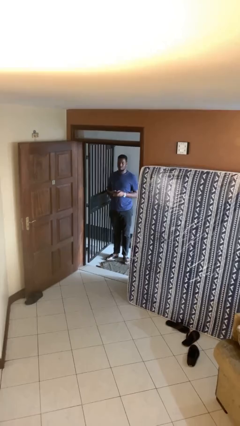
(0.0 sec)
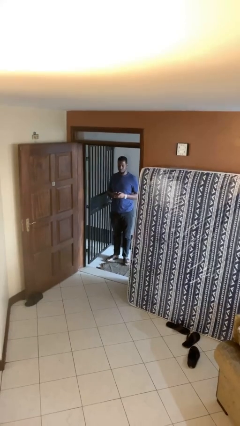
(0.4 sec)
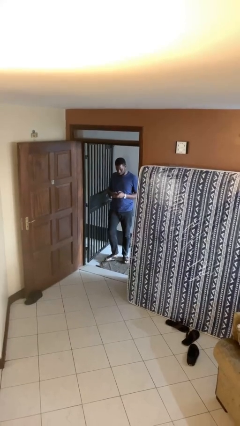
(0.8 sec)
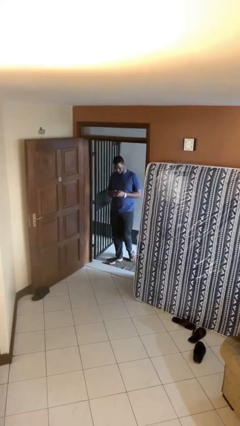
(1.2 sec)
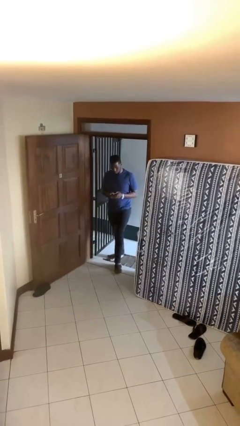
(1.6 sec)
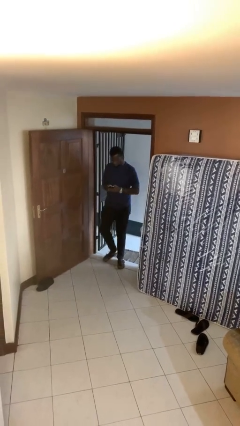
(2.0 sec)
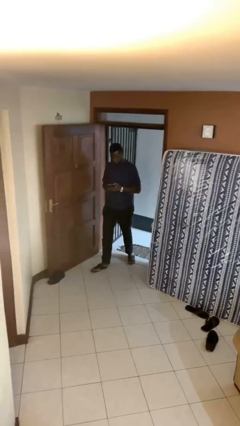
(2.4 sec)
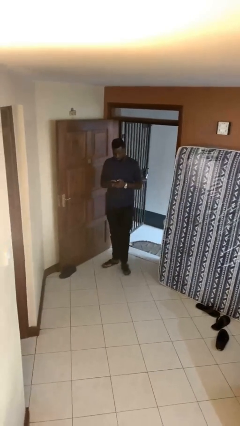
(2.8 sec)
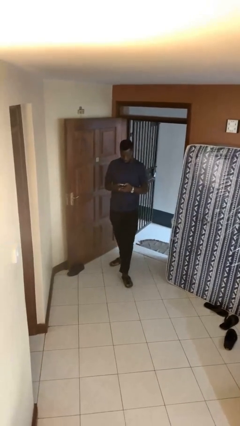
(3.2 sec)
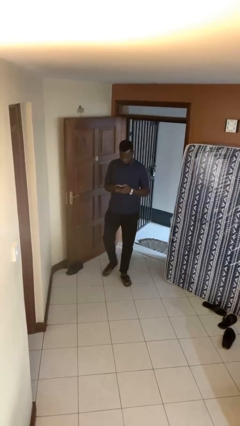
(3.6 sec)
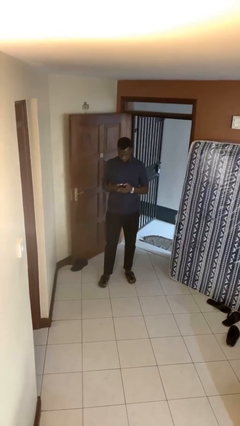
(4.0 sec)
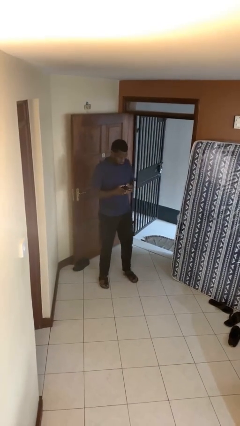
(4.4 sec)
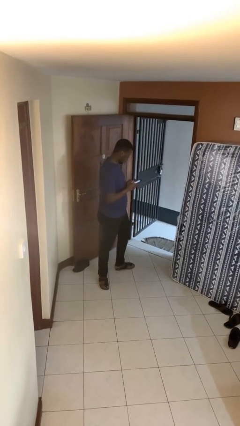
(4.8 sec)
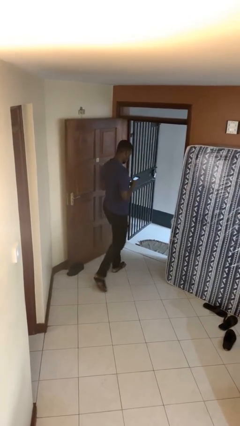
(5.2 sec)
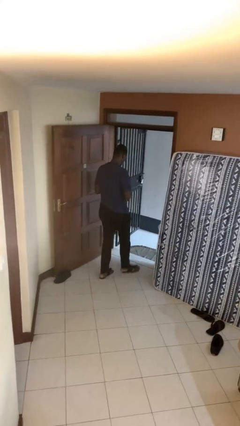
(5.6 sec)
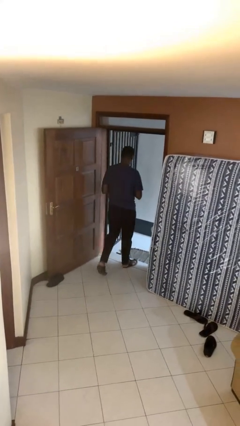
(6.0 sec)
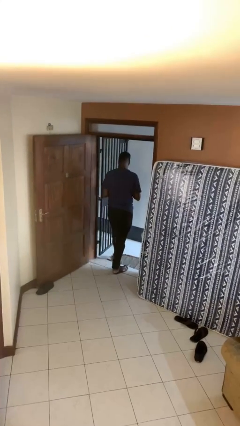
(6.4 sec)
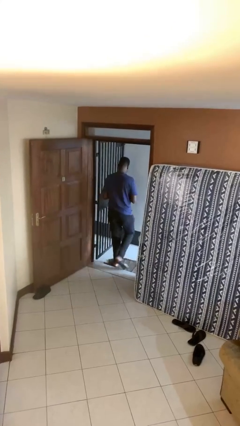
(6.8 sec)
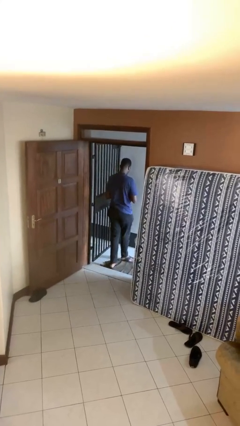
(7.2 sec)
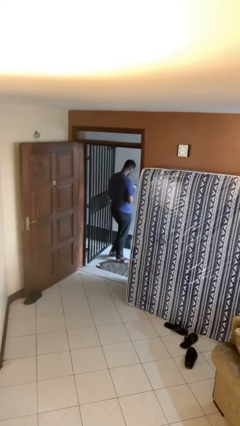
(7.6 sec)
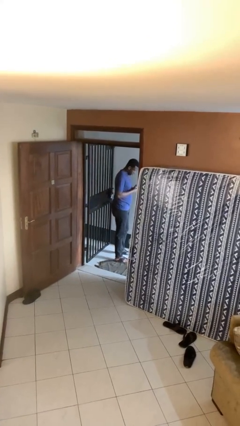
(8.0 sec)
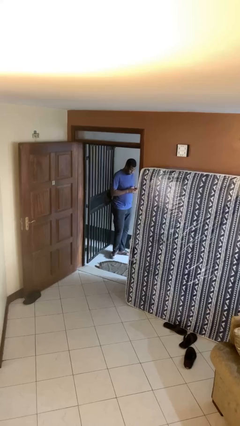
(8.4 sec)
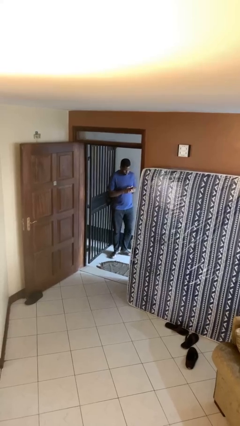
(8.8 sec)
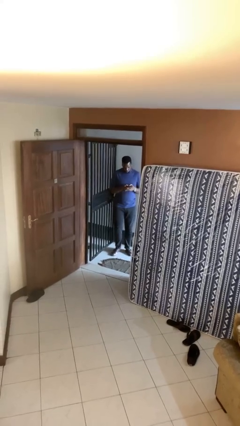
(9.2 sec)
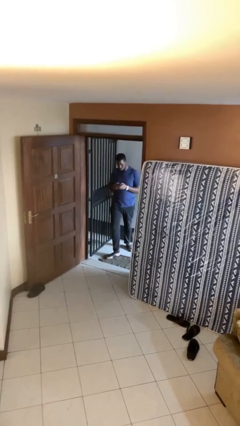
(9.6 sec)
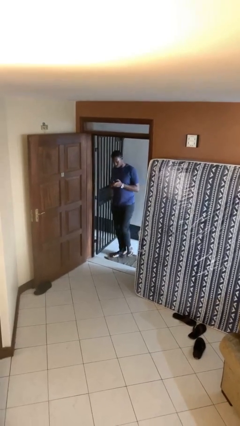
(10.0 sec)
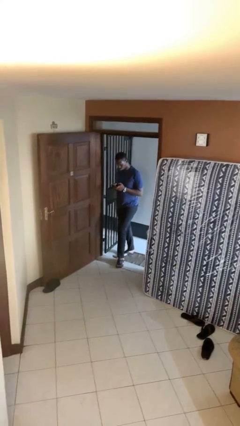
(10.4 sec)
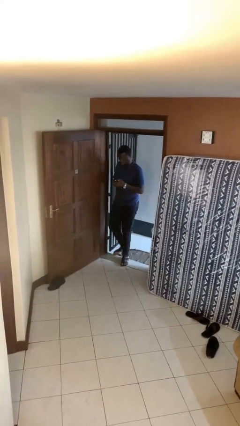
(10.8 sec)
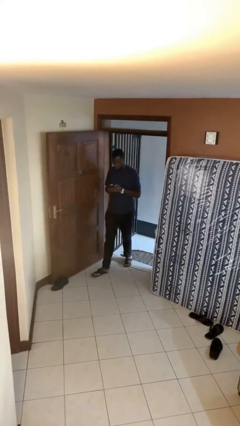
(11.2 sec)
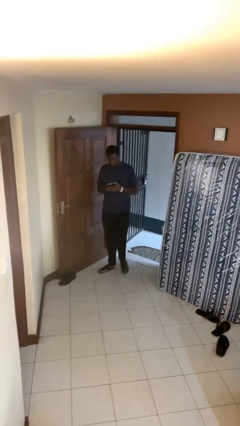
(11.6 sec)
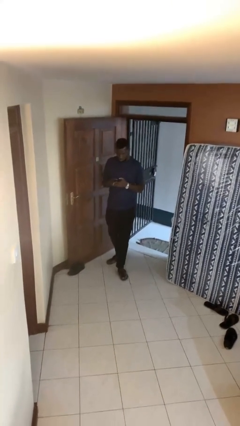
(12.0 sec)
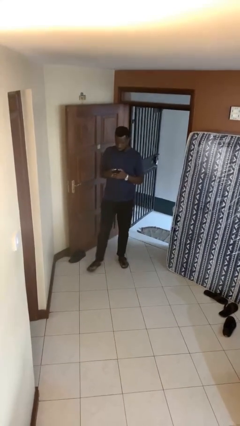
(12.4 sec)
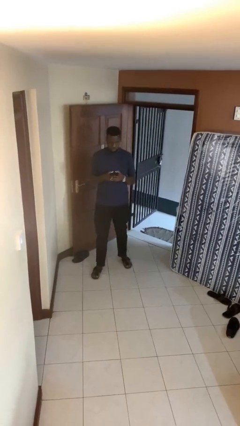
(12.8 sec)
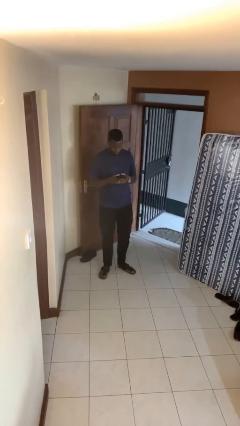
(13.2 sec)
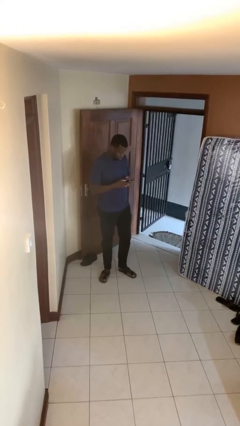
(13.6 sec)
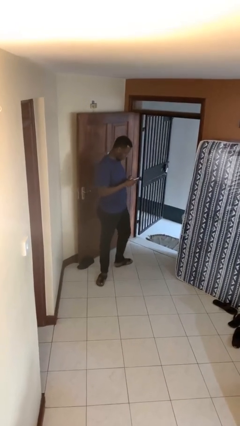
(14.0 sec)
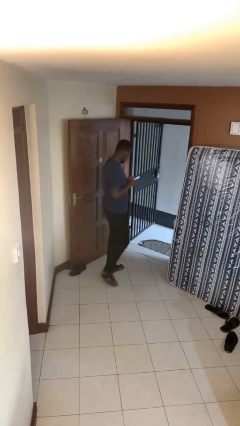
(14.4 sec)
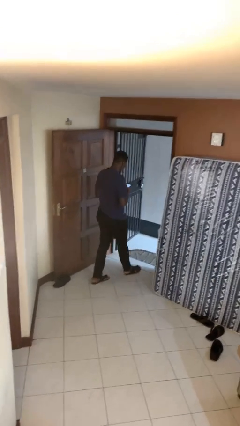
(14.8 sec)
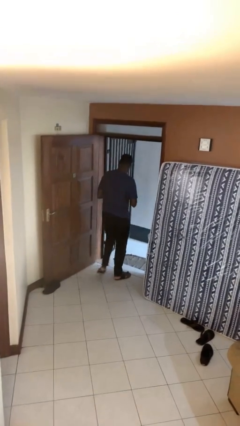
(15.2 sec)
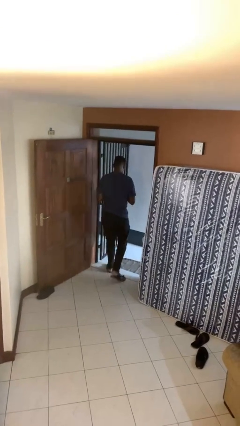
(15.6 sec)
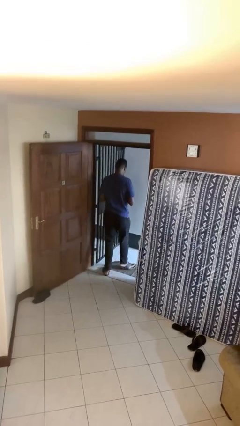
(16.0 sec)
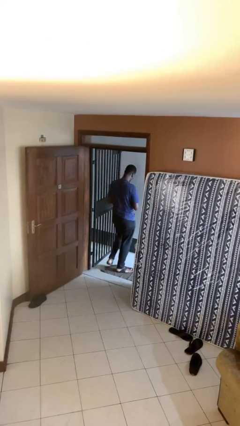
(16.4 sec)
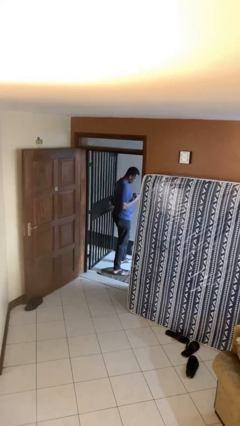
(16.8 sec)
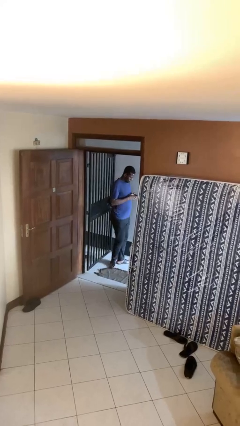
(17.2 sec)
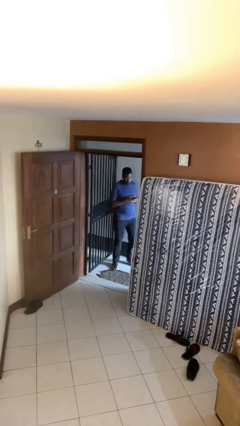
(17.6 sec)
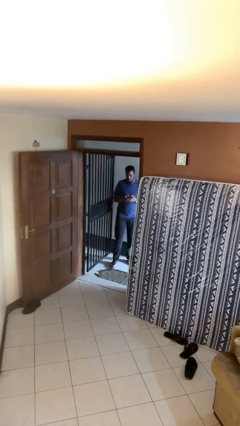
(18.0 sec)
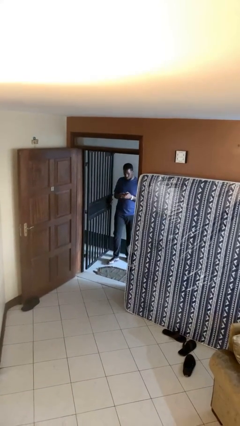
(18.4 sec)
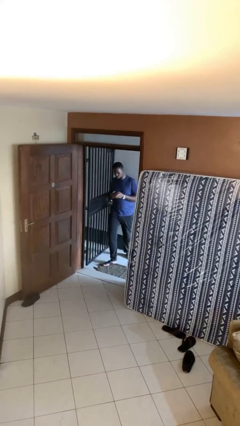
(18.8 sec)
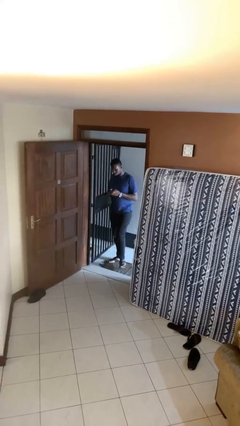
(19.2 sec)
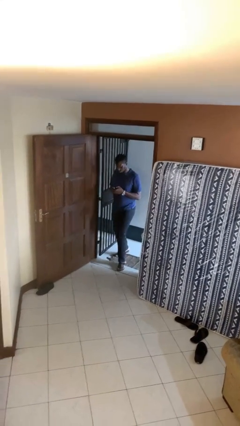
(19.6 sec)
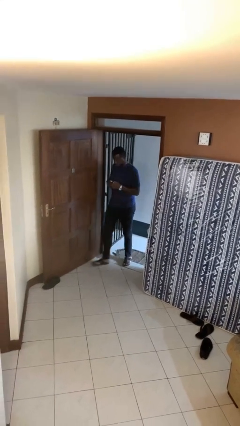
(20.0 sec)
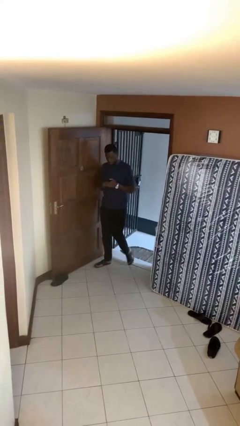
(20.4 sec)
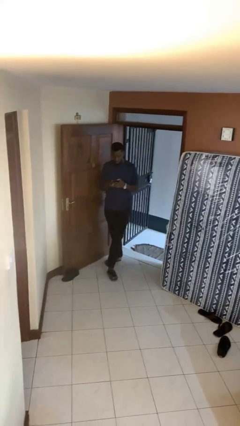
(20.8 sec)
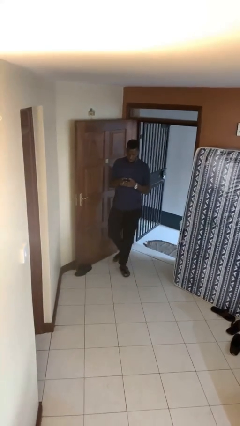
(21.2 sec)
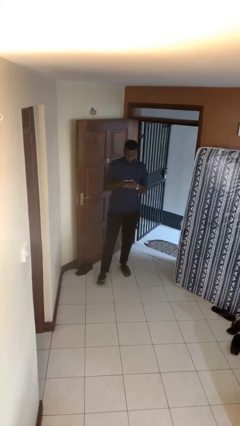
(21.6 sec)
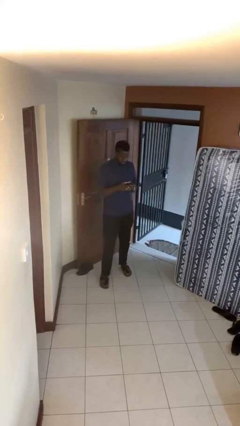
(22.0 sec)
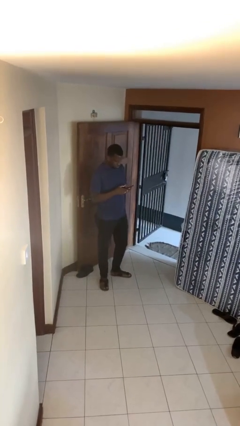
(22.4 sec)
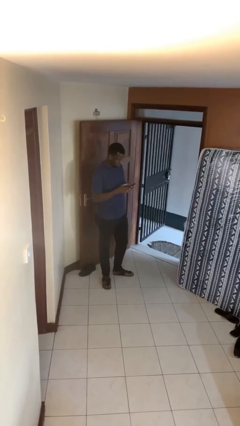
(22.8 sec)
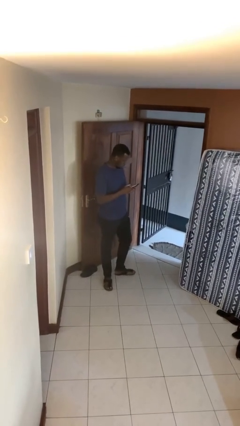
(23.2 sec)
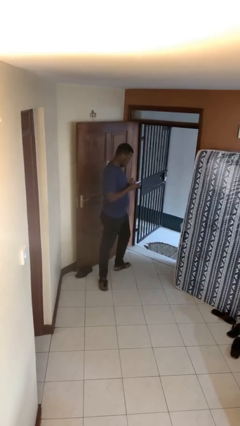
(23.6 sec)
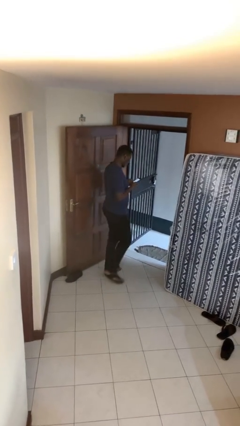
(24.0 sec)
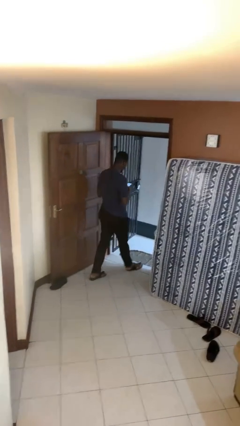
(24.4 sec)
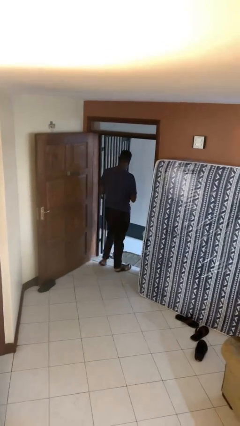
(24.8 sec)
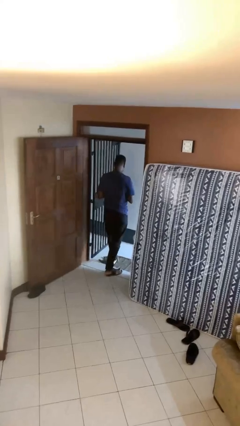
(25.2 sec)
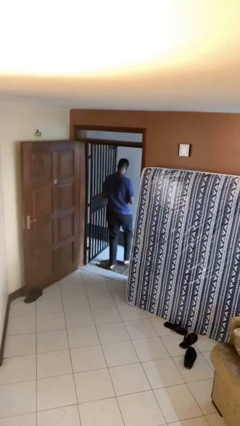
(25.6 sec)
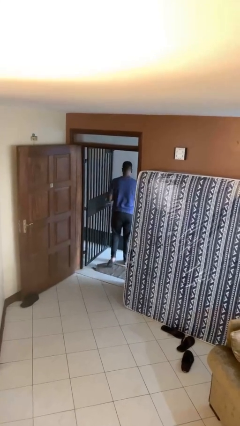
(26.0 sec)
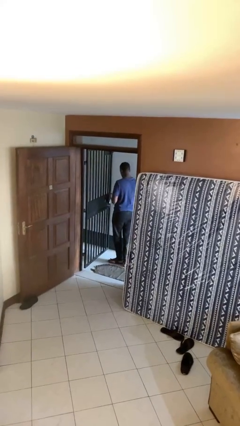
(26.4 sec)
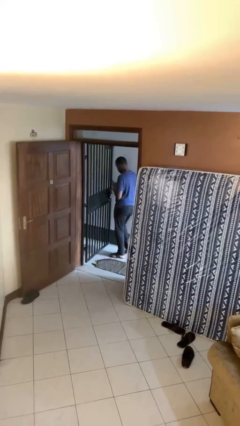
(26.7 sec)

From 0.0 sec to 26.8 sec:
person texts on phone

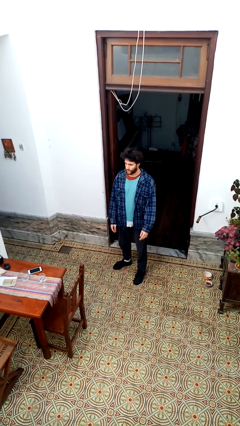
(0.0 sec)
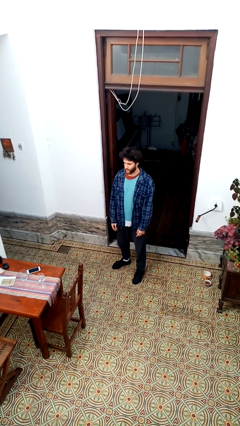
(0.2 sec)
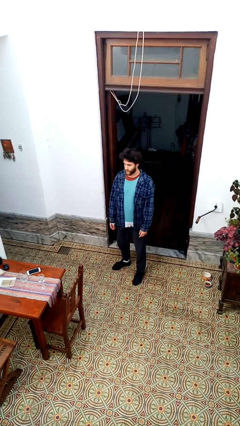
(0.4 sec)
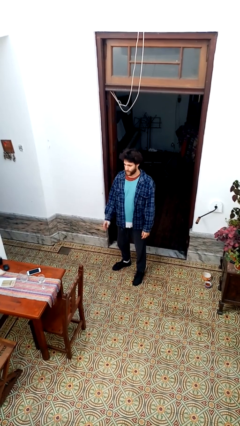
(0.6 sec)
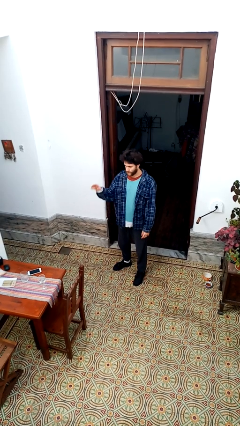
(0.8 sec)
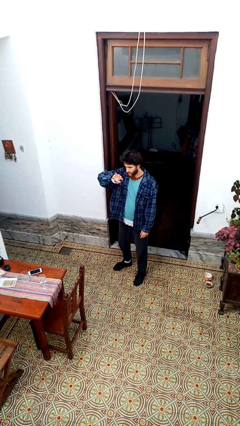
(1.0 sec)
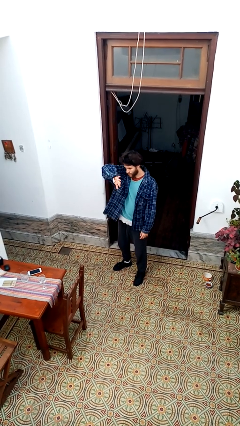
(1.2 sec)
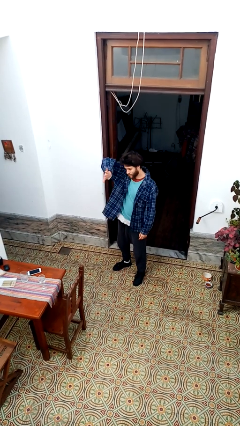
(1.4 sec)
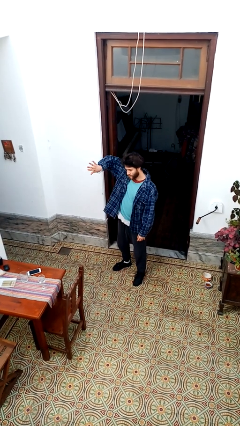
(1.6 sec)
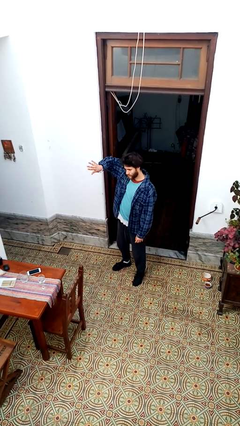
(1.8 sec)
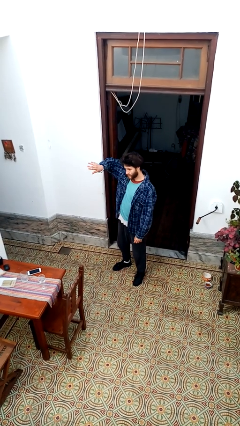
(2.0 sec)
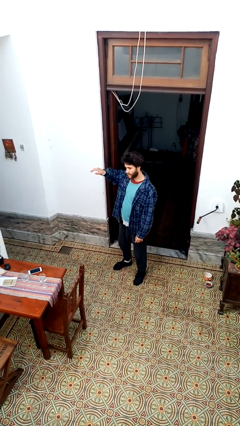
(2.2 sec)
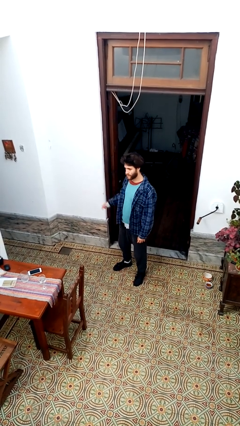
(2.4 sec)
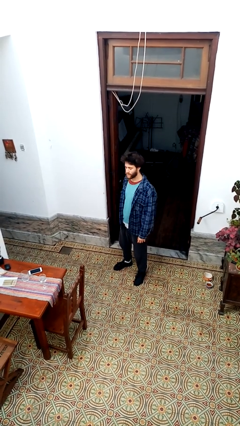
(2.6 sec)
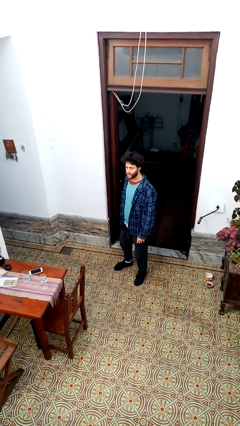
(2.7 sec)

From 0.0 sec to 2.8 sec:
person gestures swipe right

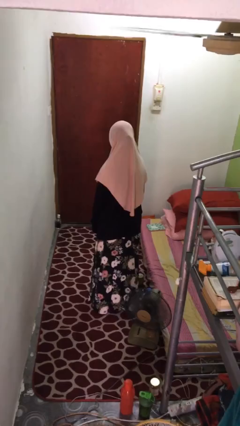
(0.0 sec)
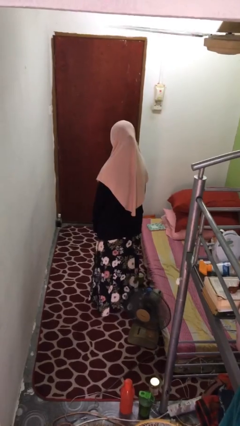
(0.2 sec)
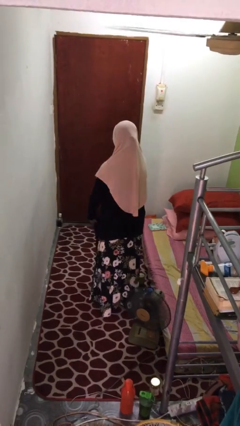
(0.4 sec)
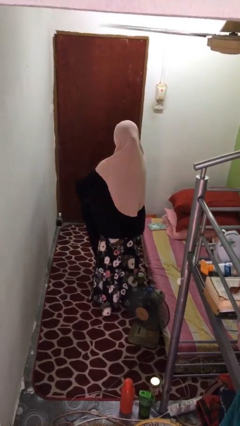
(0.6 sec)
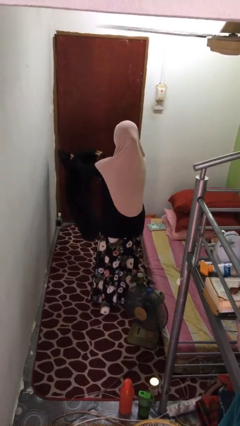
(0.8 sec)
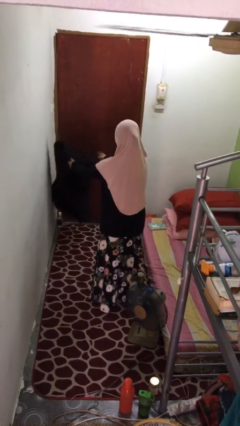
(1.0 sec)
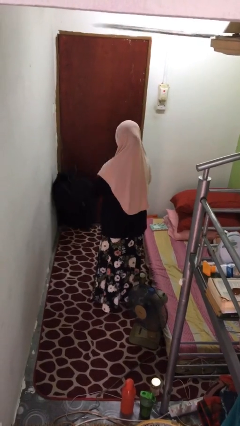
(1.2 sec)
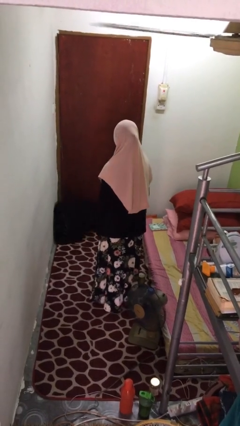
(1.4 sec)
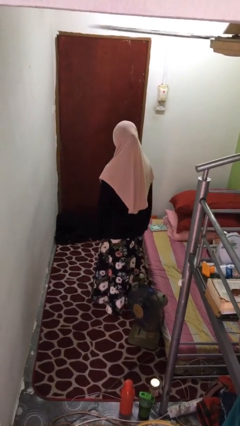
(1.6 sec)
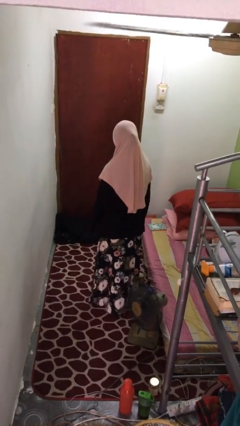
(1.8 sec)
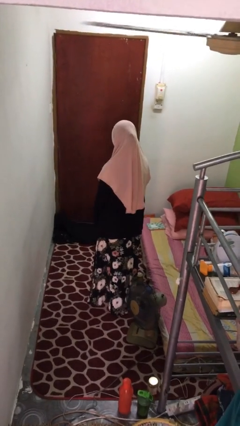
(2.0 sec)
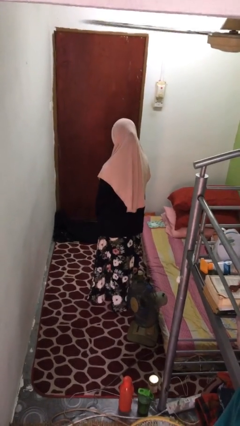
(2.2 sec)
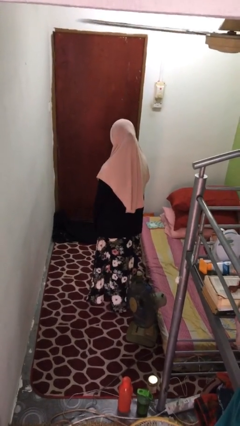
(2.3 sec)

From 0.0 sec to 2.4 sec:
person throws object to ground
